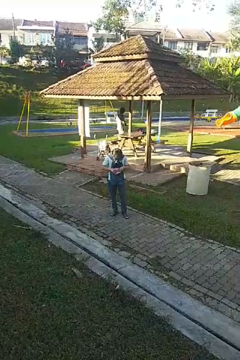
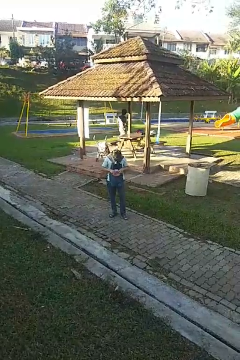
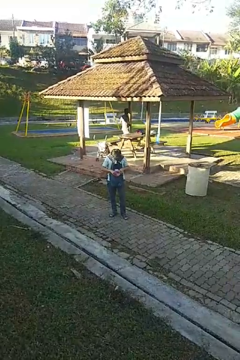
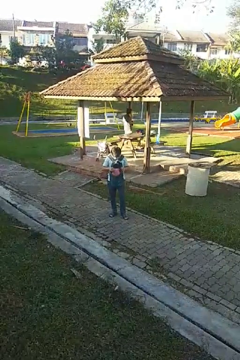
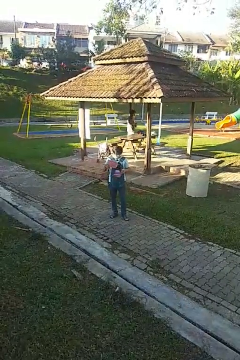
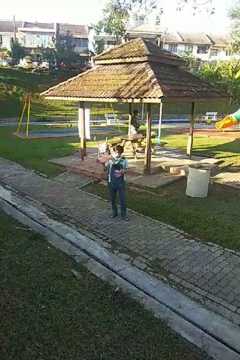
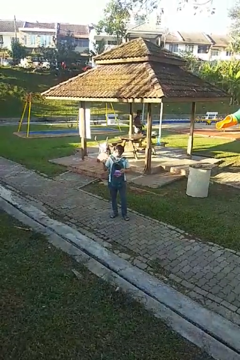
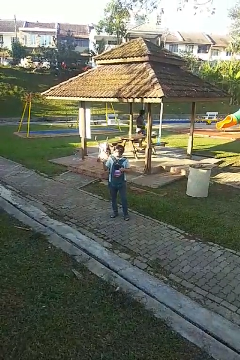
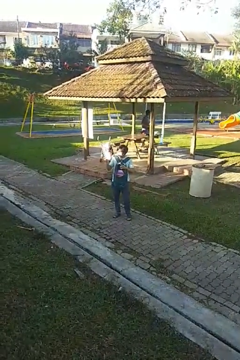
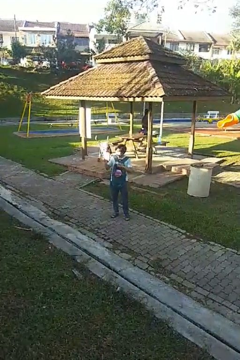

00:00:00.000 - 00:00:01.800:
person takes object from backpack

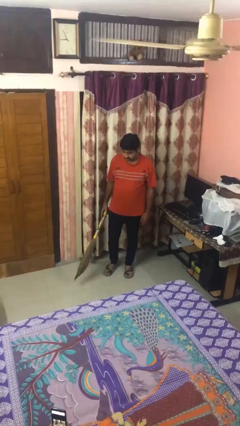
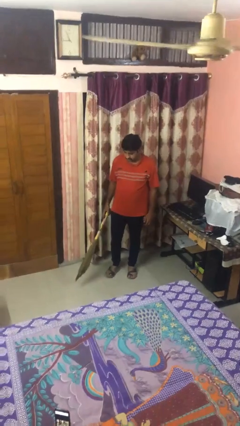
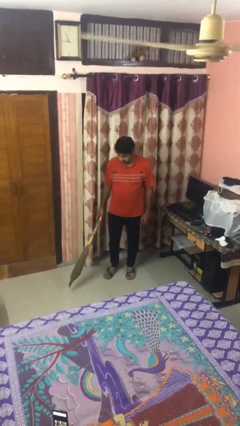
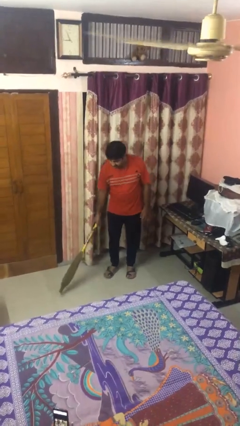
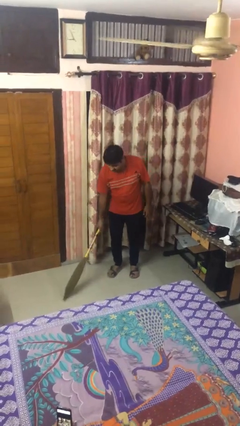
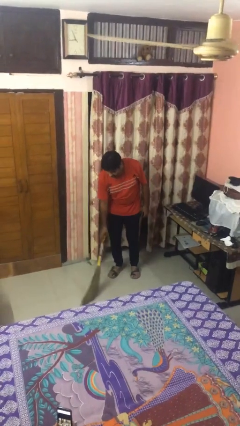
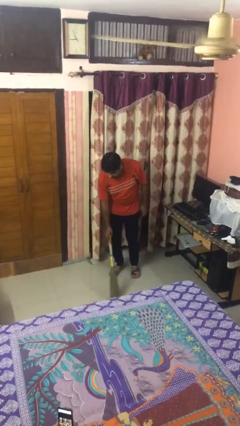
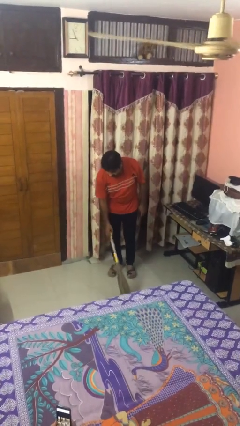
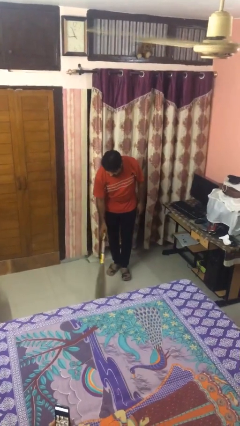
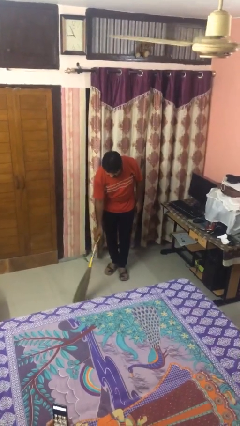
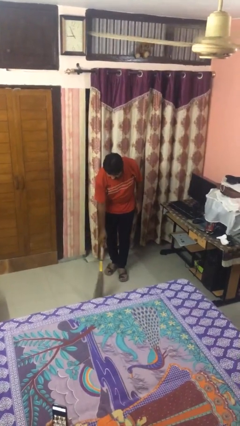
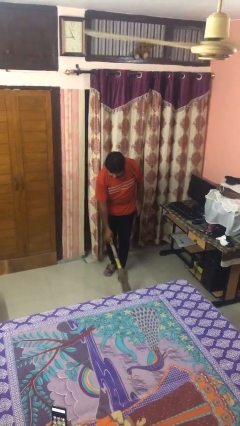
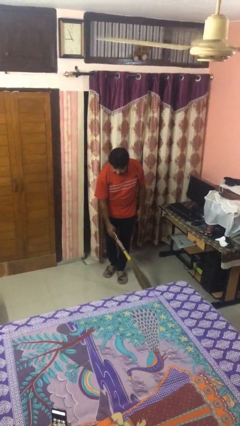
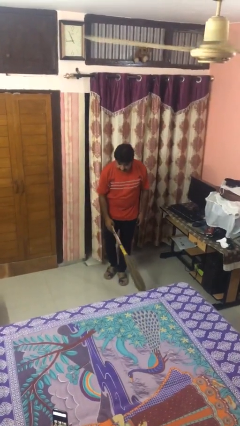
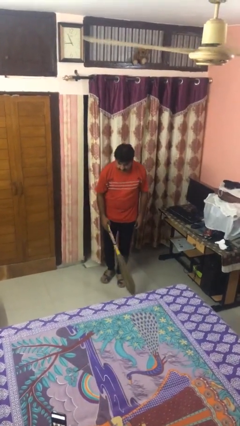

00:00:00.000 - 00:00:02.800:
person sweeps floor

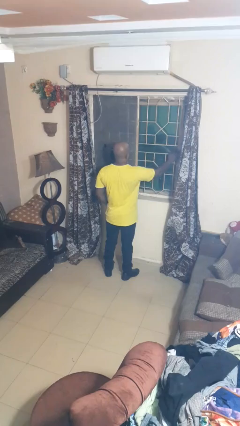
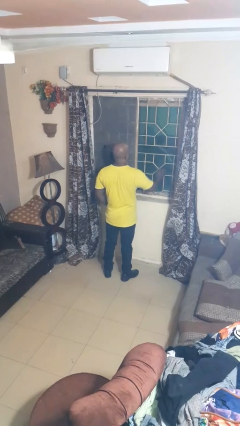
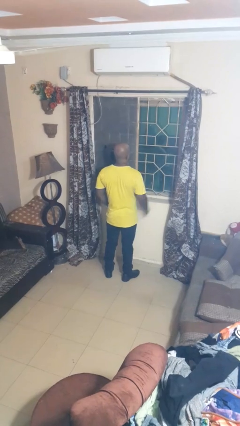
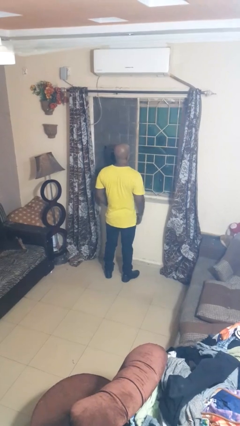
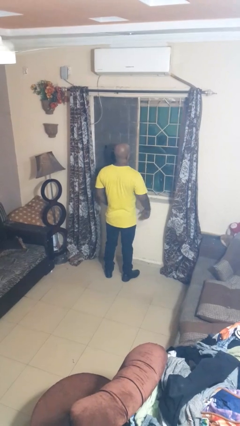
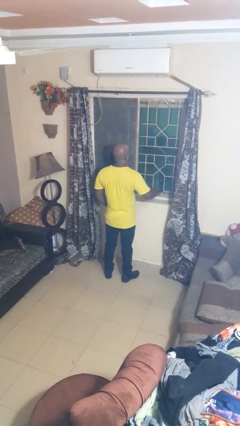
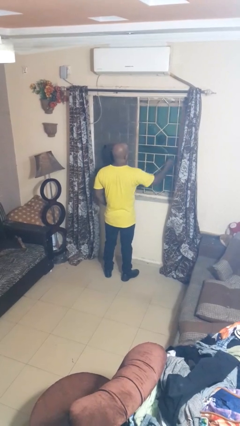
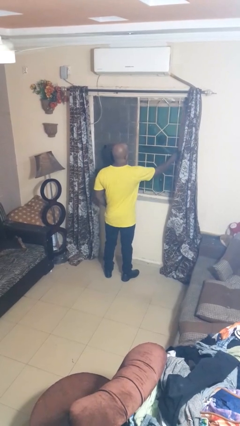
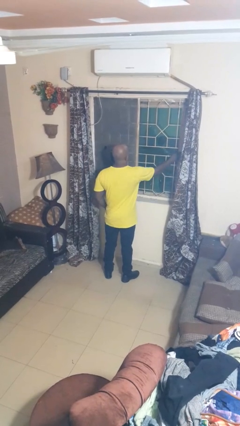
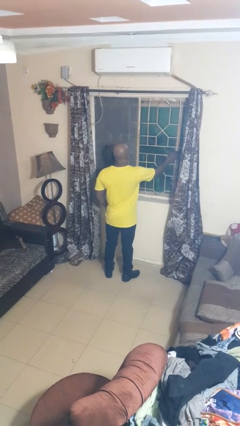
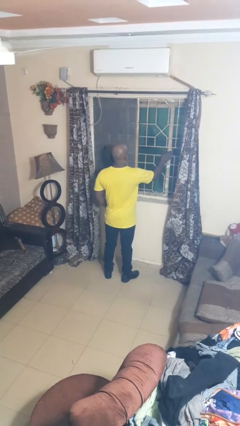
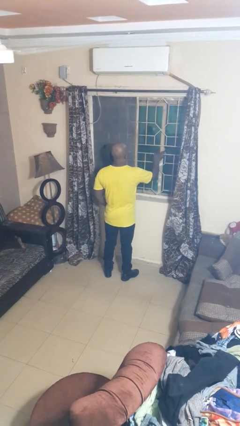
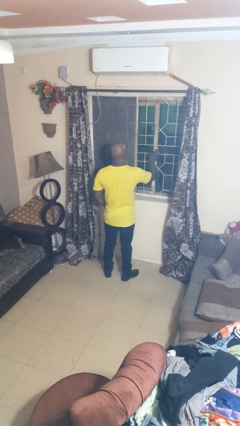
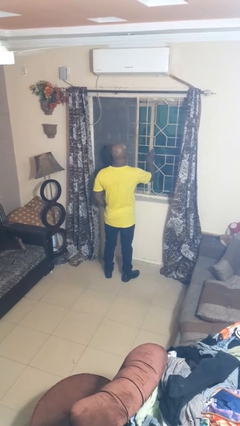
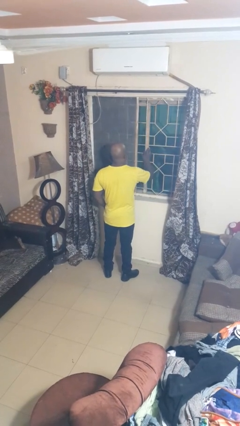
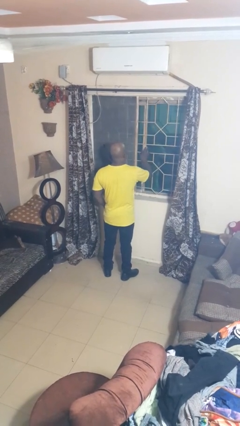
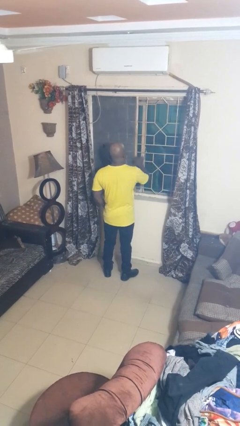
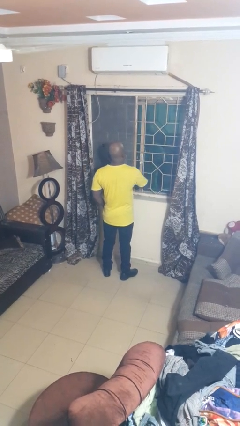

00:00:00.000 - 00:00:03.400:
person closes home window

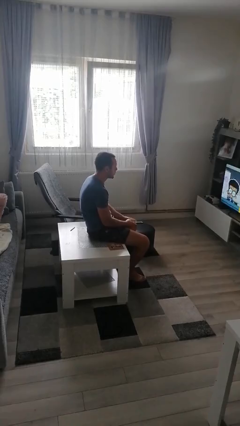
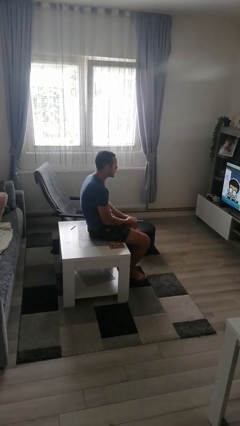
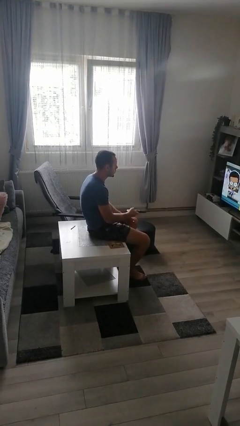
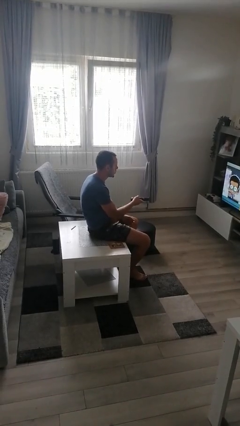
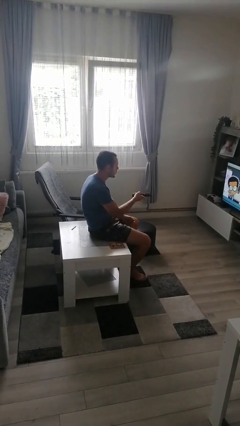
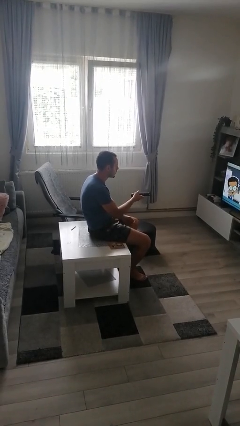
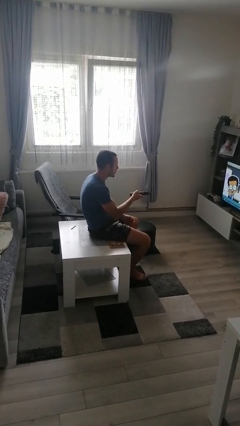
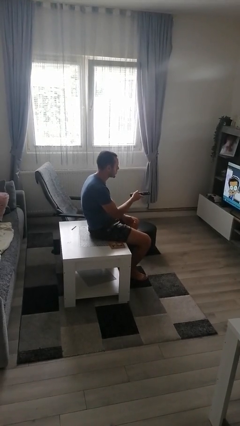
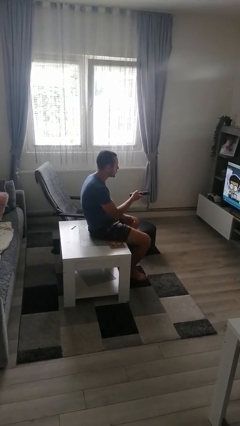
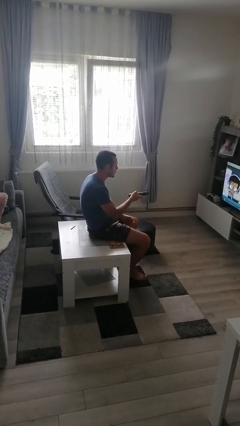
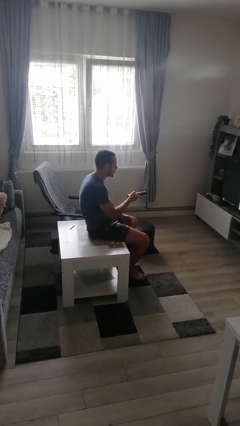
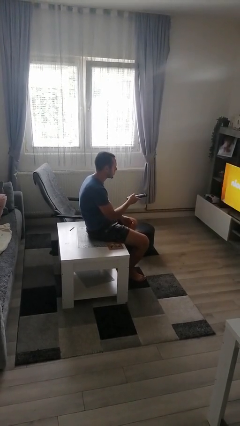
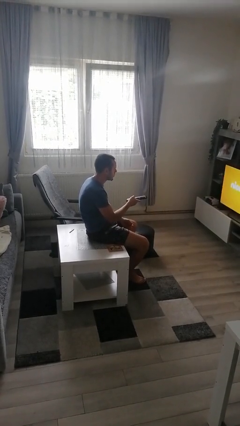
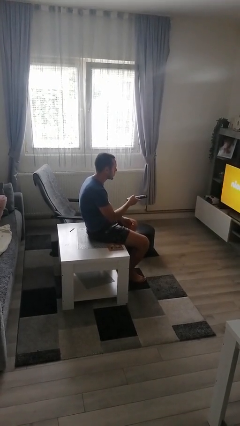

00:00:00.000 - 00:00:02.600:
person uses television remote

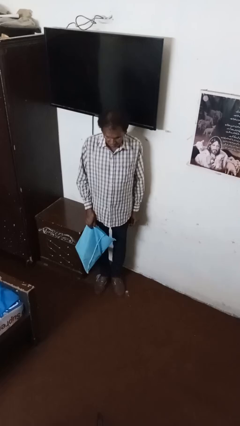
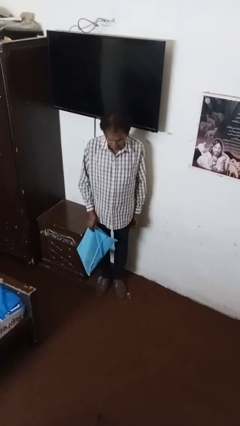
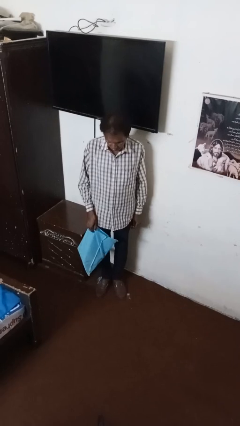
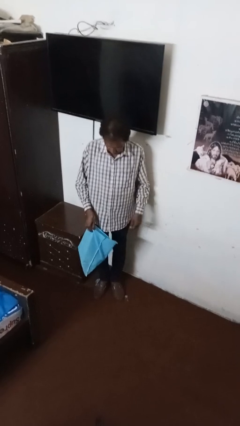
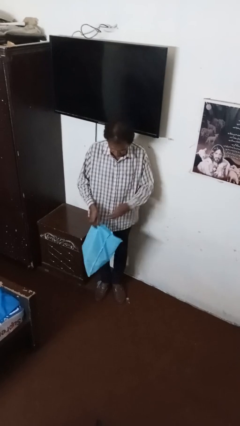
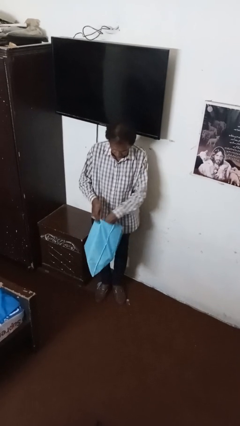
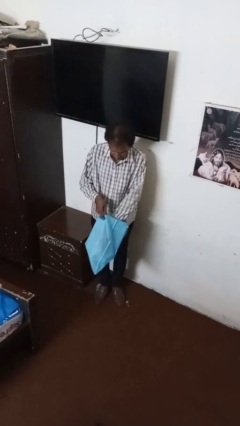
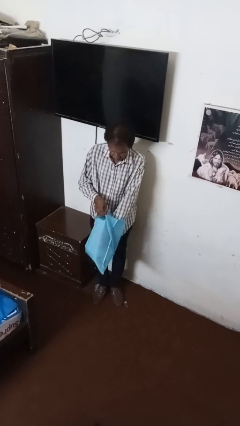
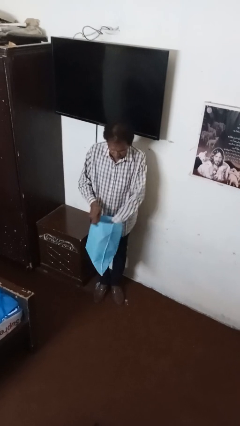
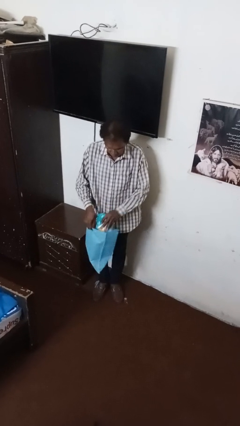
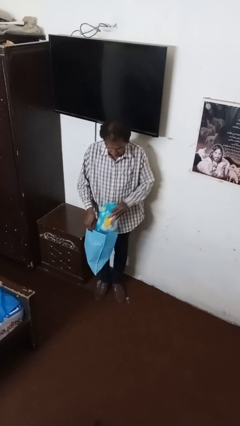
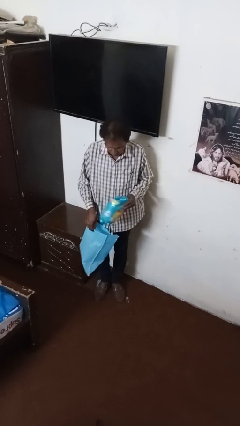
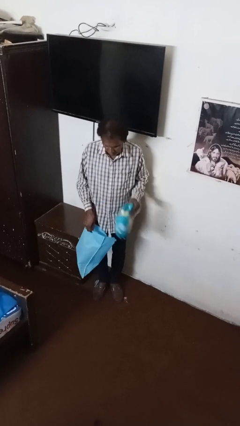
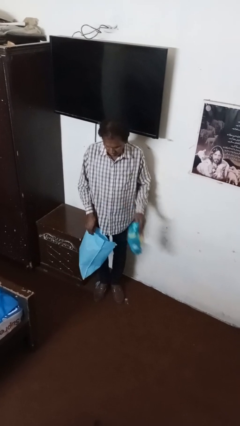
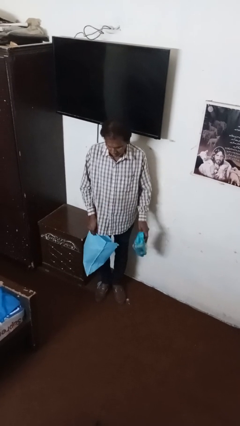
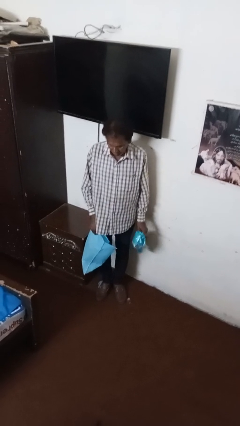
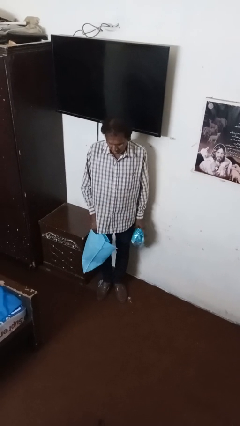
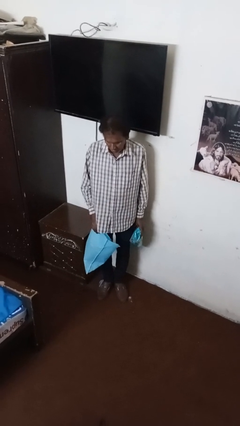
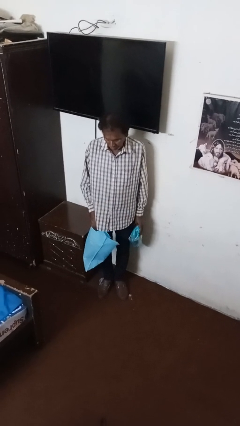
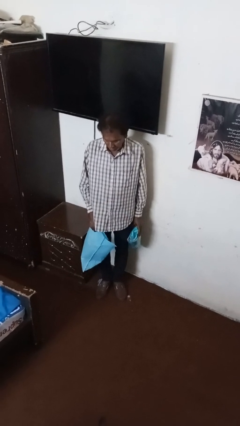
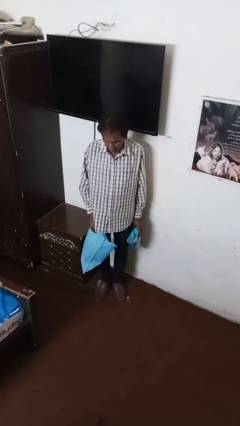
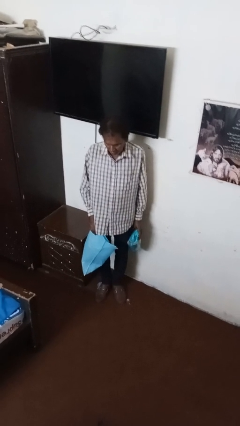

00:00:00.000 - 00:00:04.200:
person searches in bag

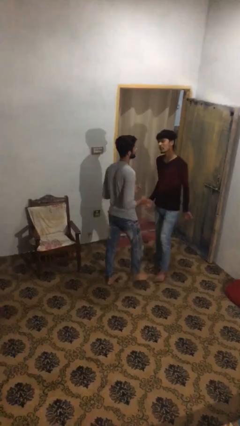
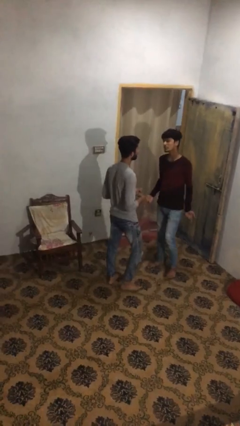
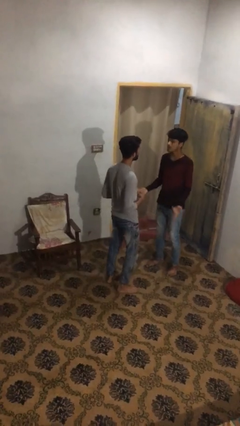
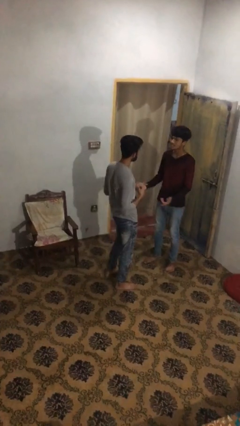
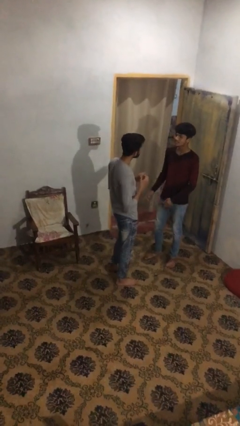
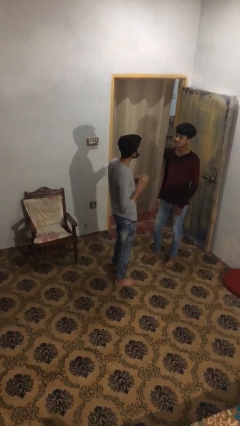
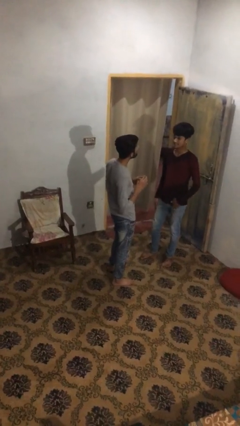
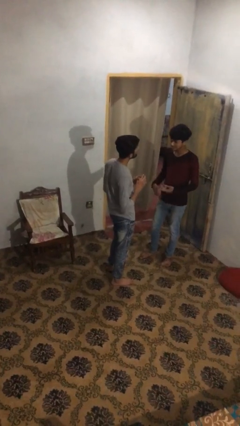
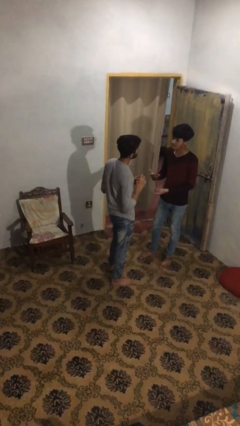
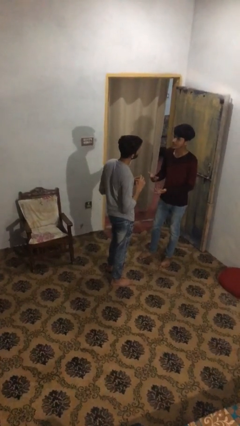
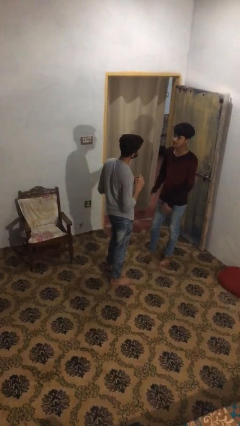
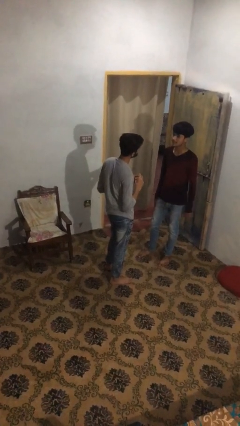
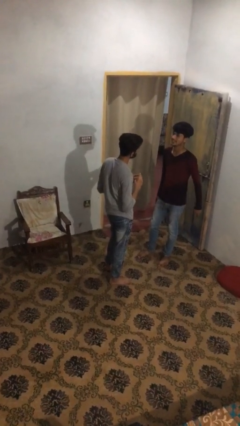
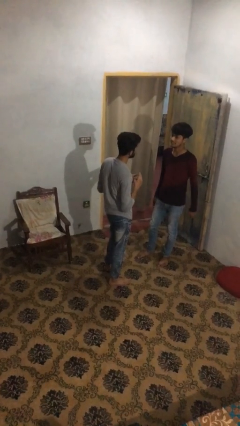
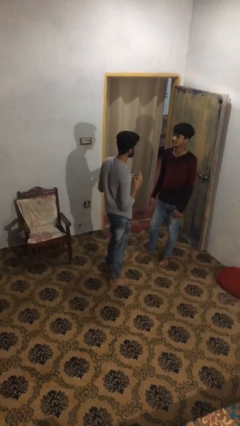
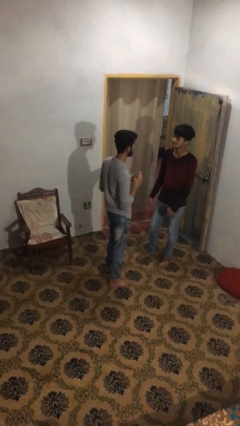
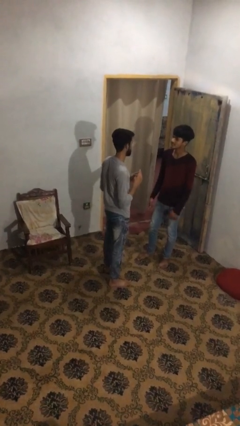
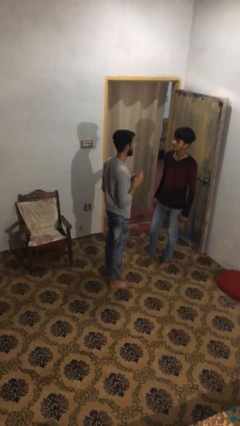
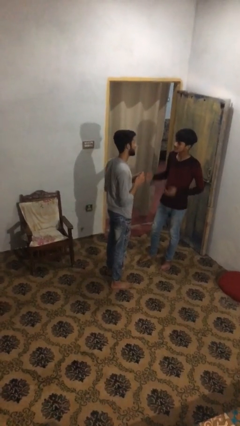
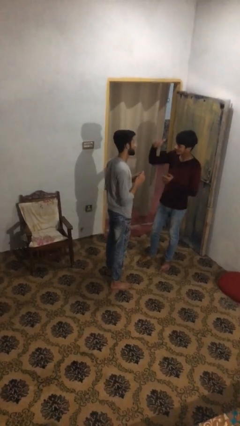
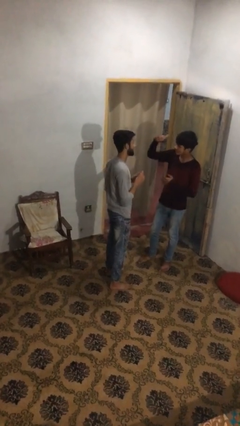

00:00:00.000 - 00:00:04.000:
person talks to person
